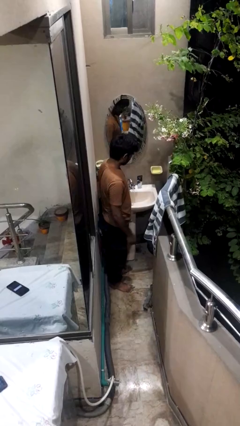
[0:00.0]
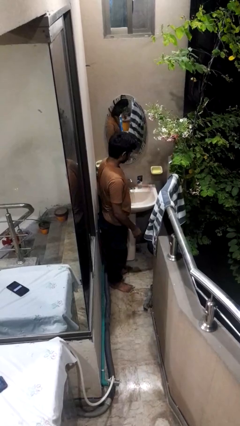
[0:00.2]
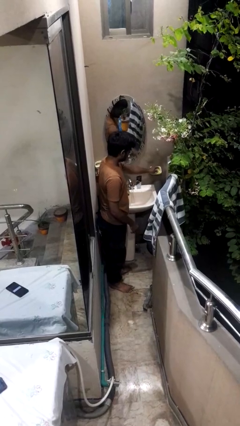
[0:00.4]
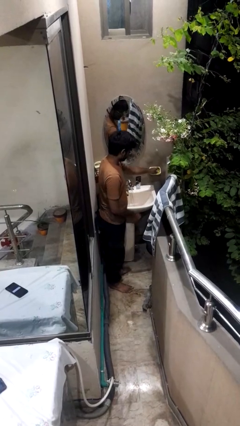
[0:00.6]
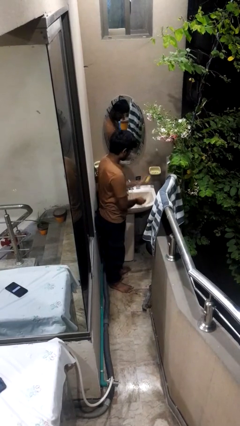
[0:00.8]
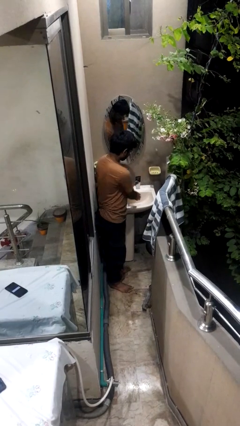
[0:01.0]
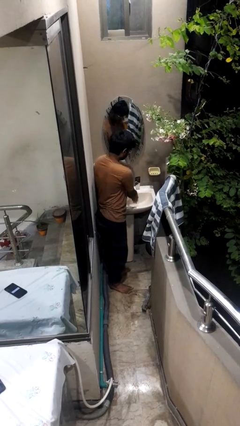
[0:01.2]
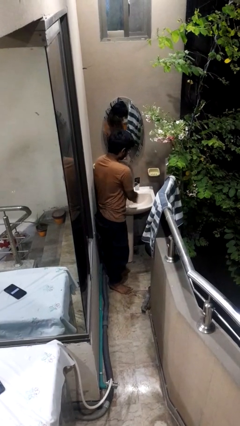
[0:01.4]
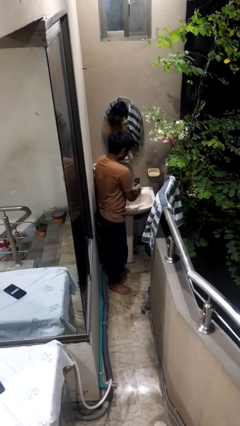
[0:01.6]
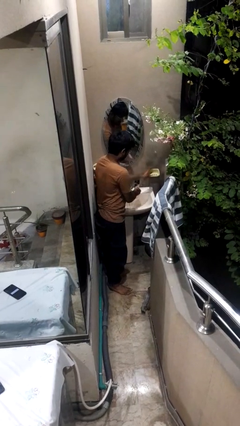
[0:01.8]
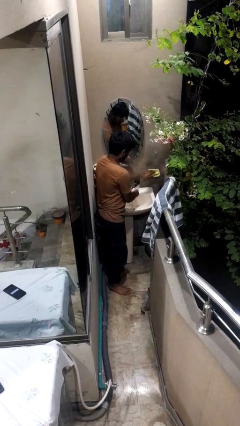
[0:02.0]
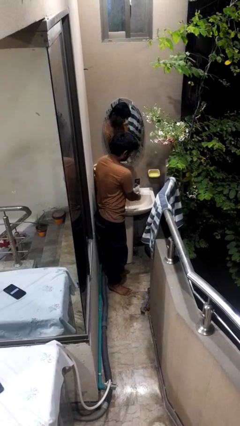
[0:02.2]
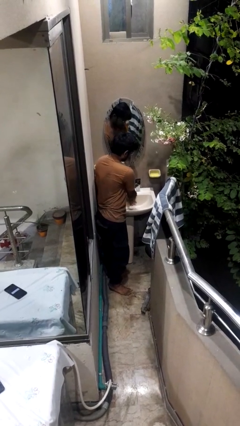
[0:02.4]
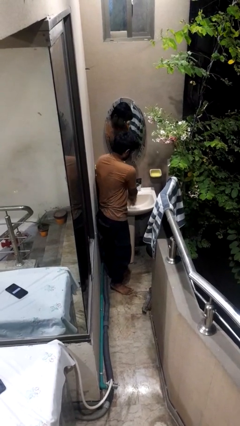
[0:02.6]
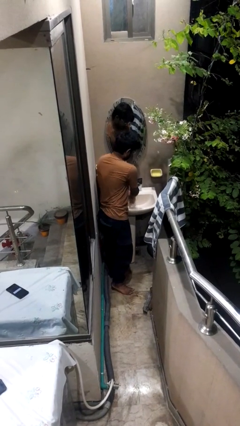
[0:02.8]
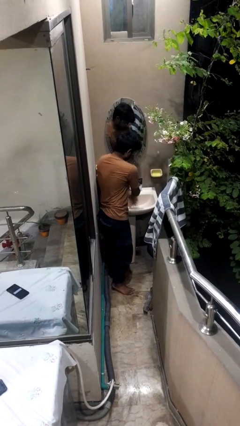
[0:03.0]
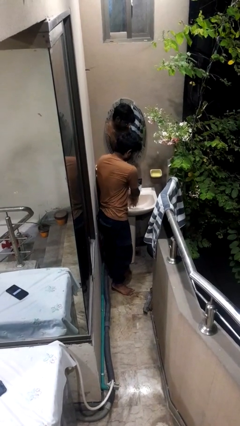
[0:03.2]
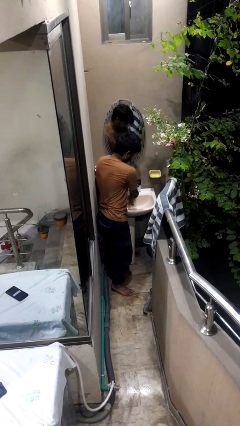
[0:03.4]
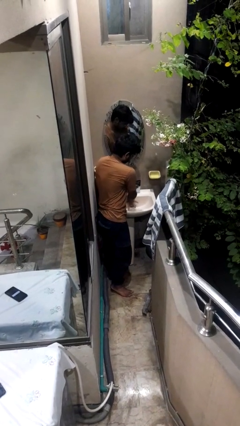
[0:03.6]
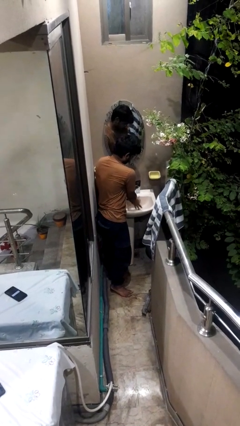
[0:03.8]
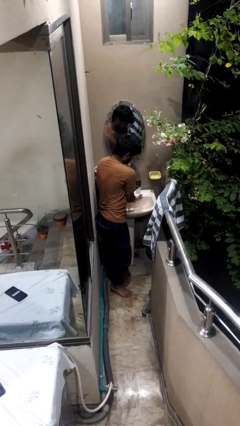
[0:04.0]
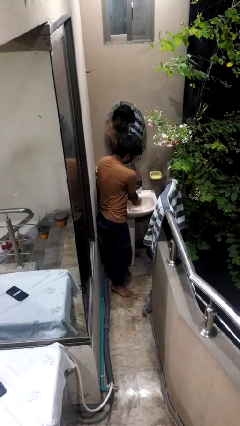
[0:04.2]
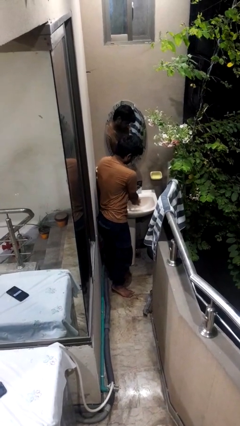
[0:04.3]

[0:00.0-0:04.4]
person washes hands

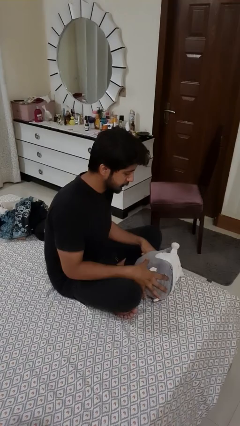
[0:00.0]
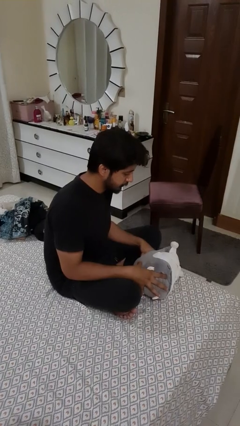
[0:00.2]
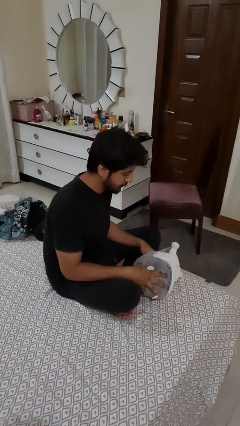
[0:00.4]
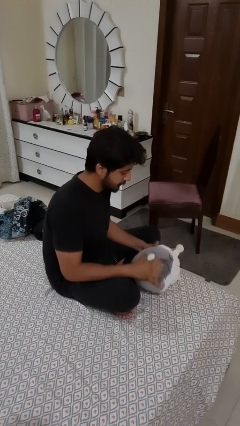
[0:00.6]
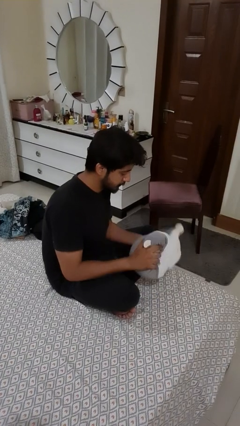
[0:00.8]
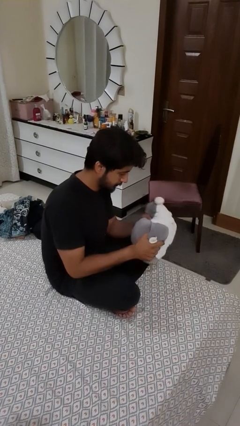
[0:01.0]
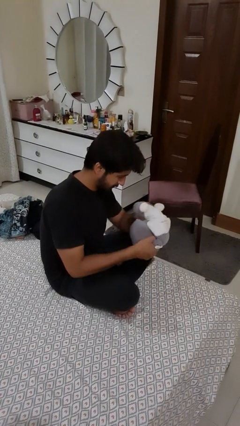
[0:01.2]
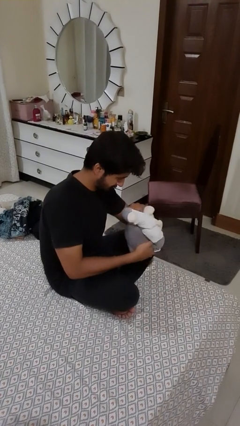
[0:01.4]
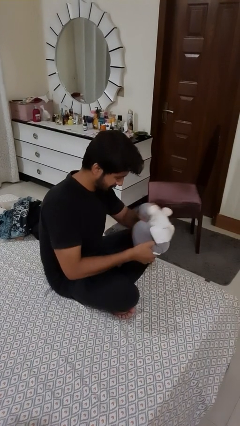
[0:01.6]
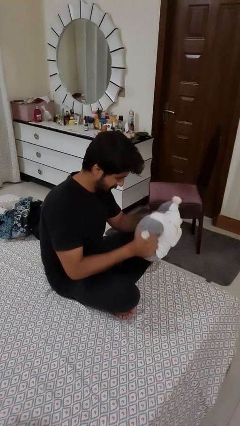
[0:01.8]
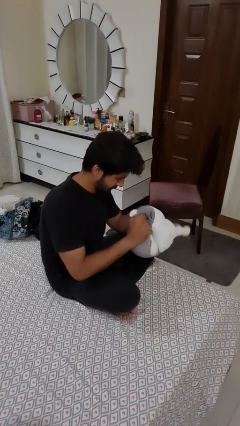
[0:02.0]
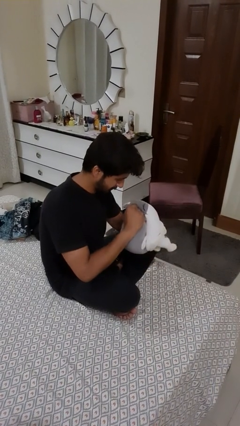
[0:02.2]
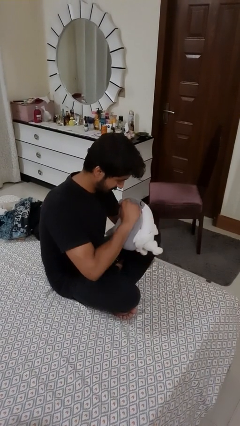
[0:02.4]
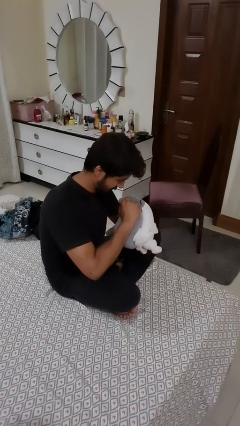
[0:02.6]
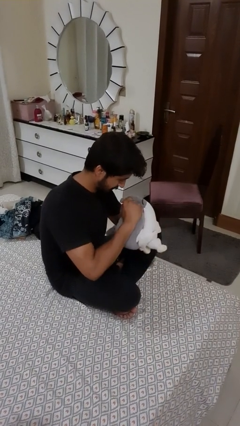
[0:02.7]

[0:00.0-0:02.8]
person squeezes object

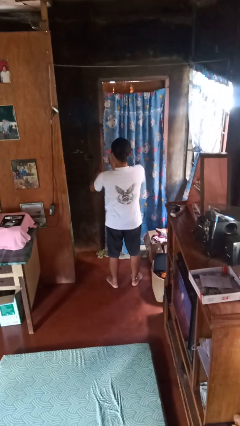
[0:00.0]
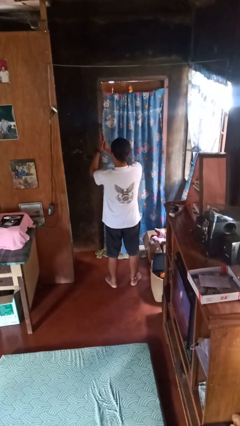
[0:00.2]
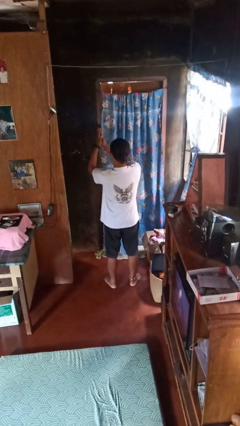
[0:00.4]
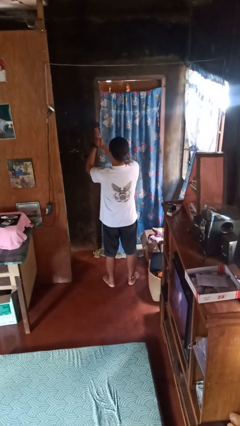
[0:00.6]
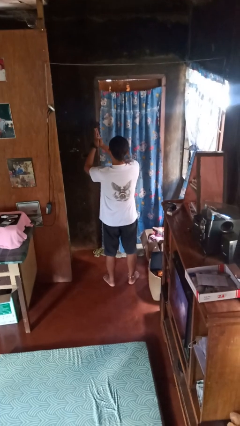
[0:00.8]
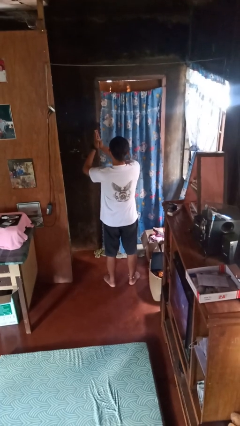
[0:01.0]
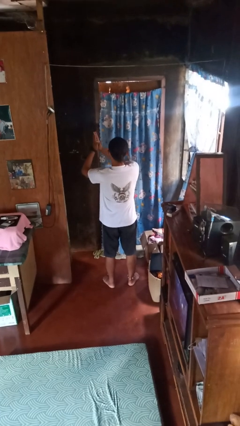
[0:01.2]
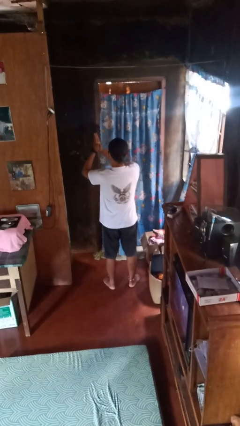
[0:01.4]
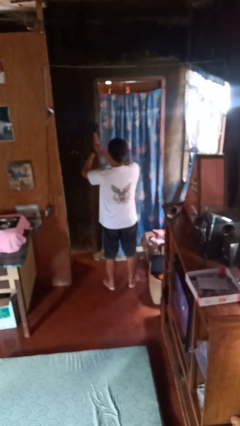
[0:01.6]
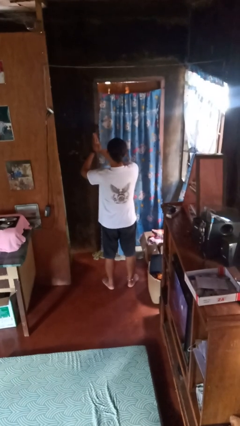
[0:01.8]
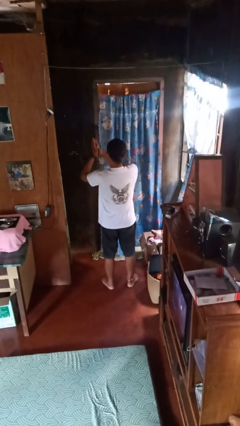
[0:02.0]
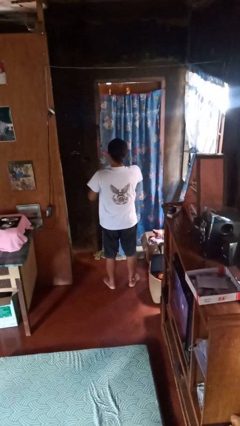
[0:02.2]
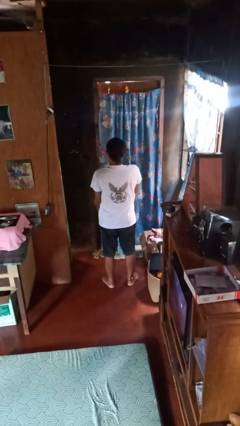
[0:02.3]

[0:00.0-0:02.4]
person prays

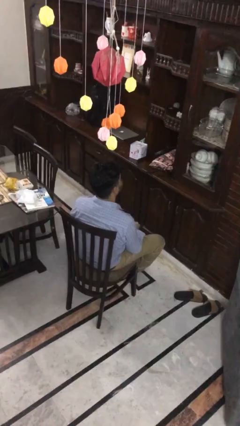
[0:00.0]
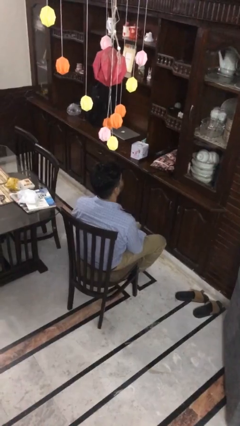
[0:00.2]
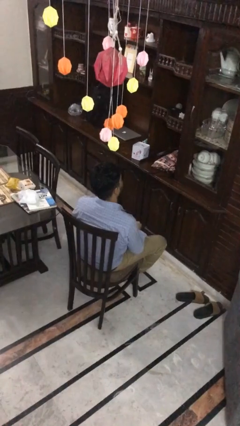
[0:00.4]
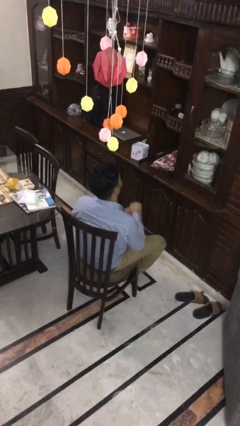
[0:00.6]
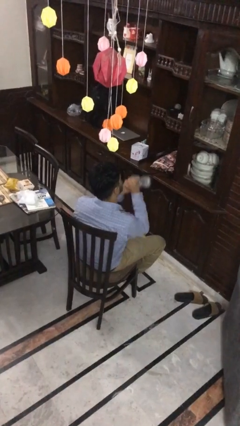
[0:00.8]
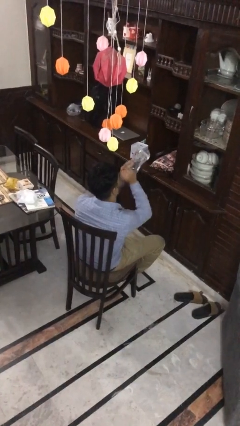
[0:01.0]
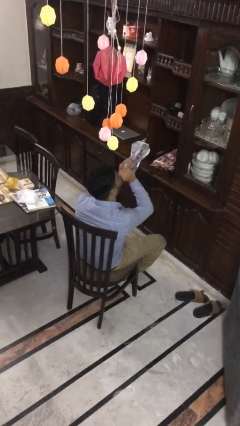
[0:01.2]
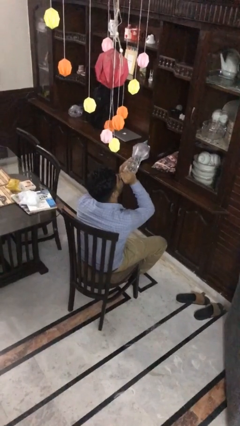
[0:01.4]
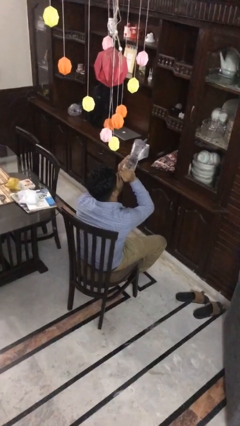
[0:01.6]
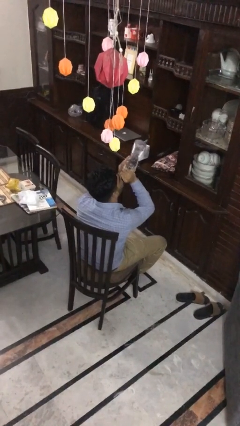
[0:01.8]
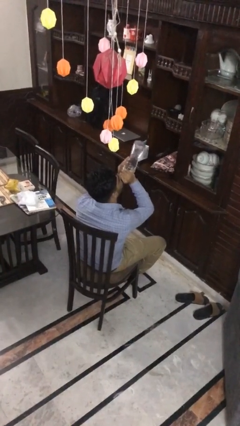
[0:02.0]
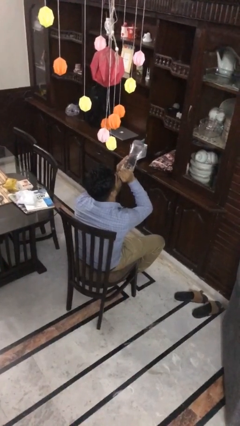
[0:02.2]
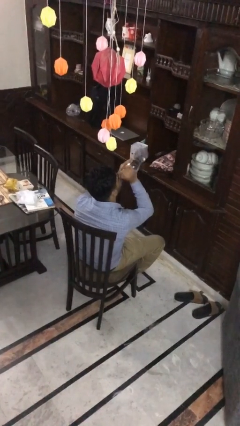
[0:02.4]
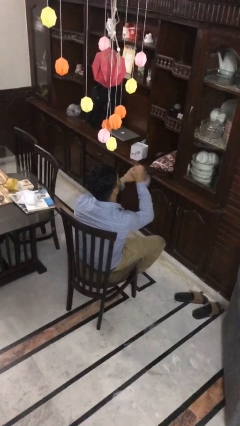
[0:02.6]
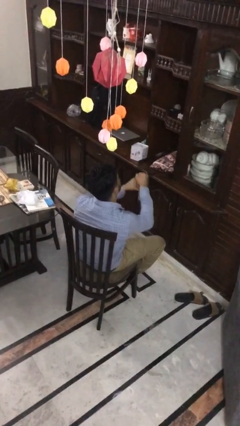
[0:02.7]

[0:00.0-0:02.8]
person drinks from bottle

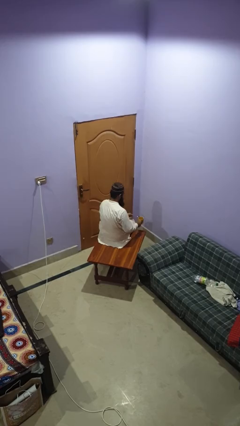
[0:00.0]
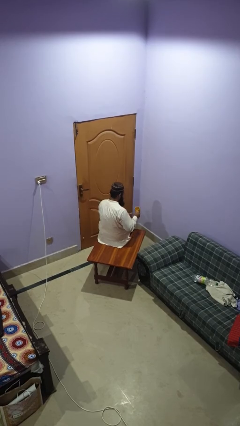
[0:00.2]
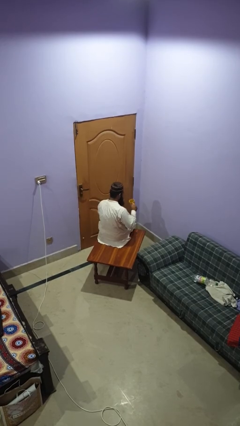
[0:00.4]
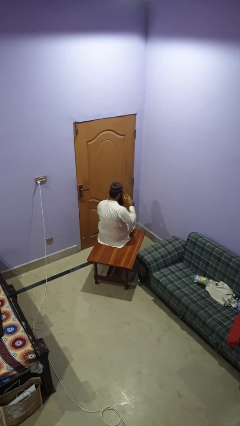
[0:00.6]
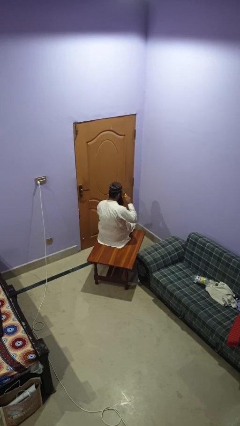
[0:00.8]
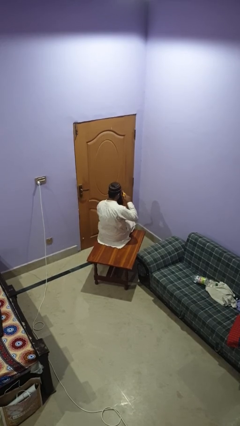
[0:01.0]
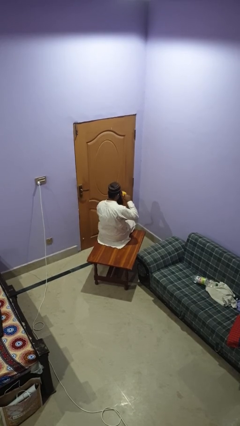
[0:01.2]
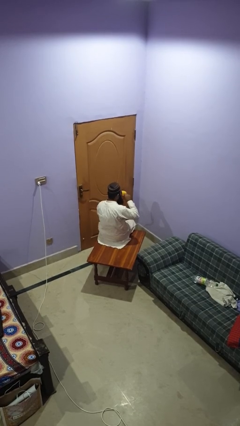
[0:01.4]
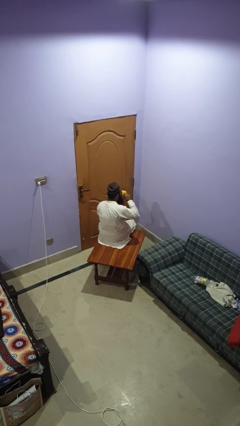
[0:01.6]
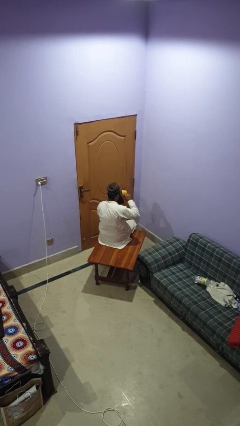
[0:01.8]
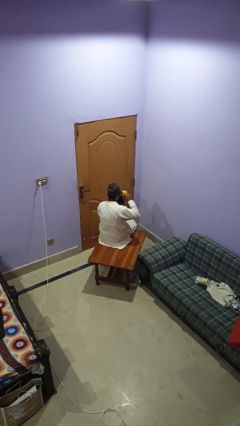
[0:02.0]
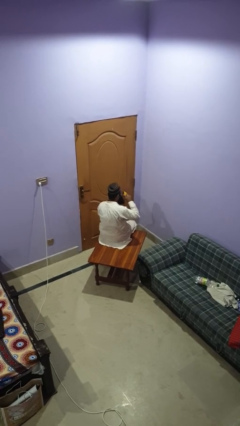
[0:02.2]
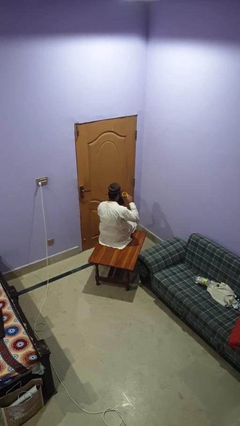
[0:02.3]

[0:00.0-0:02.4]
person drinks from mug

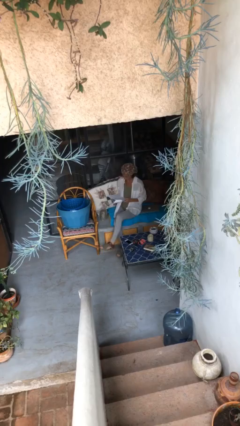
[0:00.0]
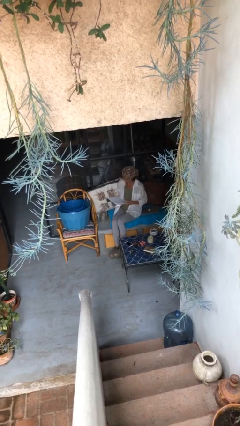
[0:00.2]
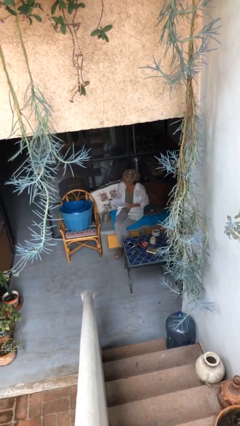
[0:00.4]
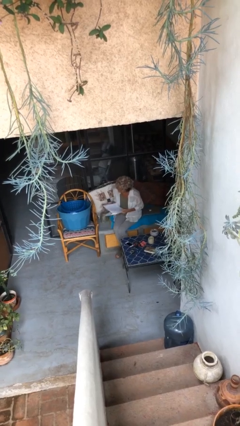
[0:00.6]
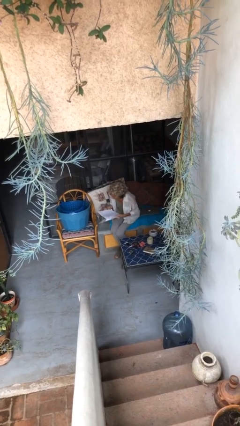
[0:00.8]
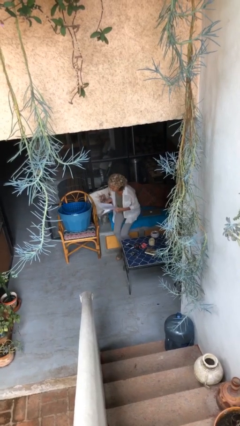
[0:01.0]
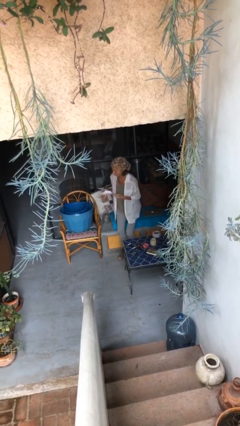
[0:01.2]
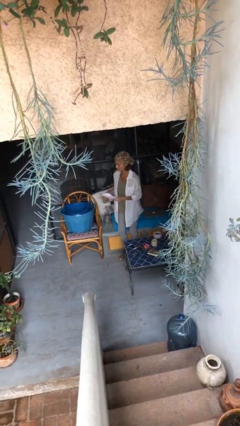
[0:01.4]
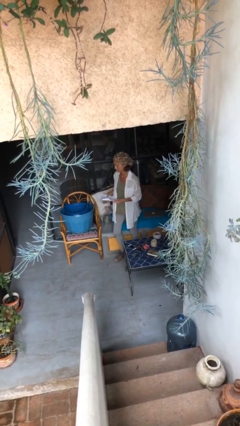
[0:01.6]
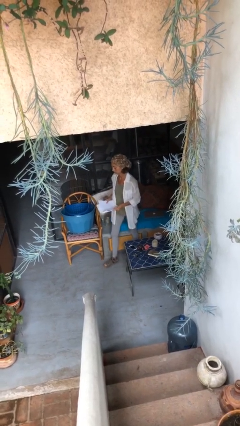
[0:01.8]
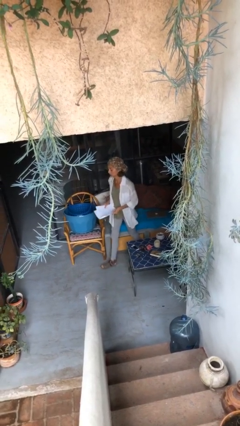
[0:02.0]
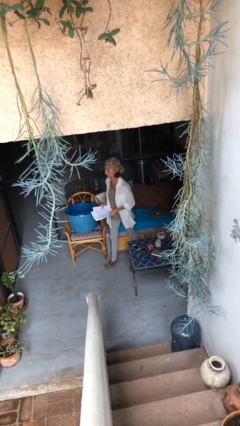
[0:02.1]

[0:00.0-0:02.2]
person stands up

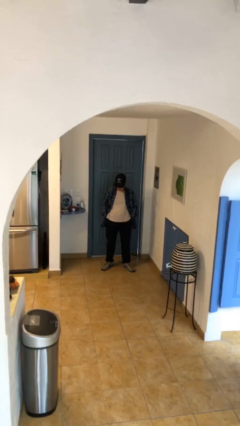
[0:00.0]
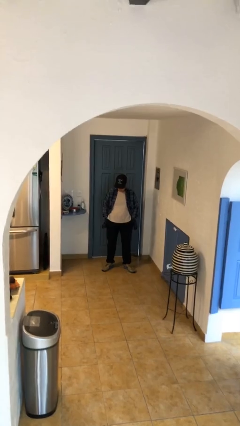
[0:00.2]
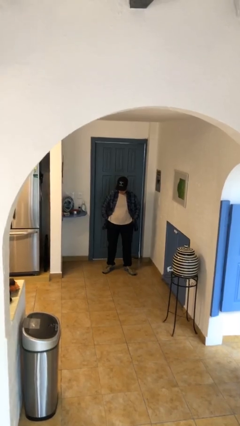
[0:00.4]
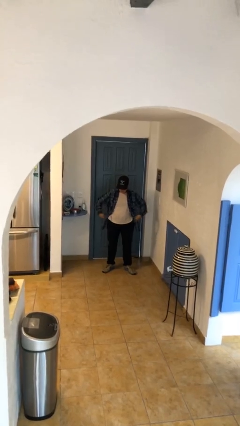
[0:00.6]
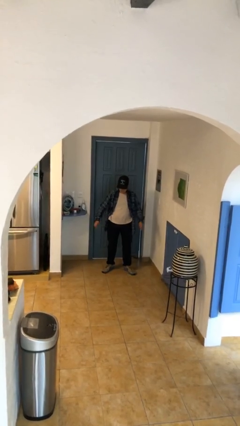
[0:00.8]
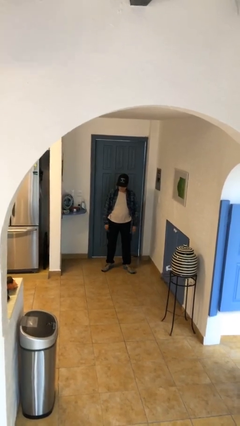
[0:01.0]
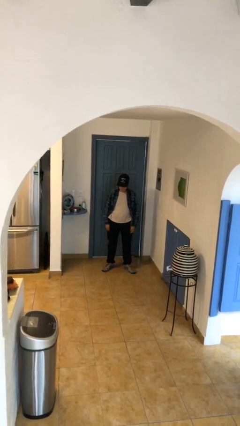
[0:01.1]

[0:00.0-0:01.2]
person puts hands in back pockets
